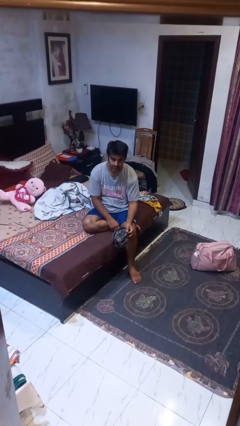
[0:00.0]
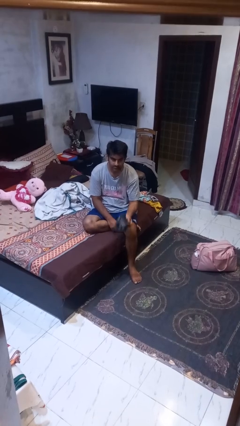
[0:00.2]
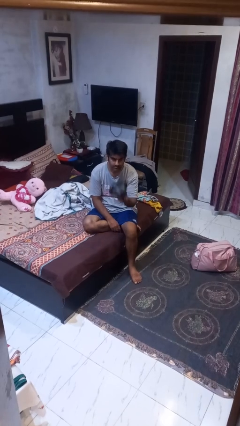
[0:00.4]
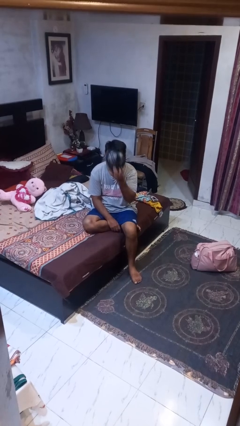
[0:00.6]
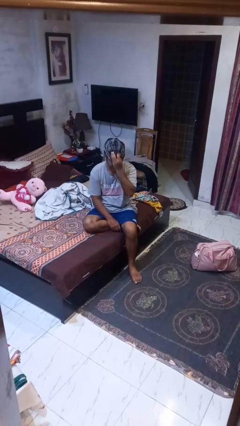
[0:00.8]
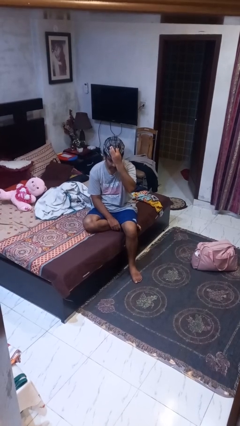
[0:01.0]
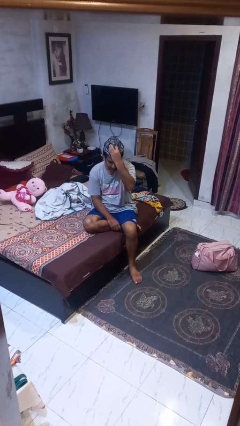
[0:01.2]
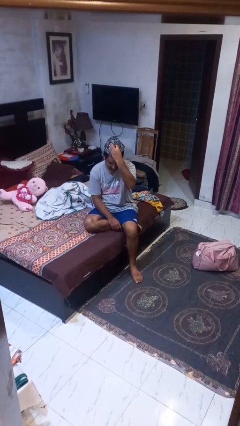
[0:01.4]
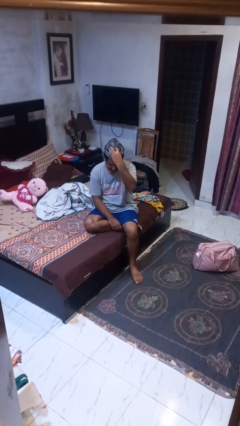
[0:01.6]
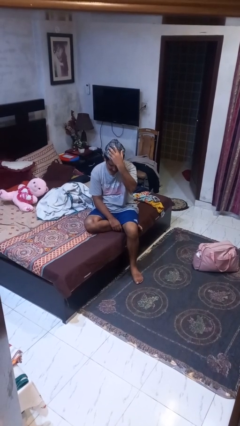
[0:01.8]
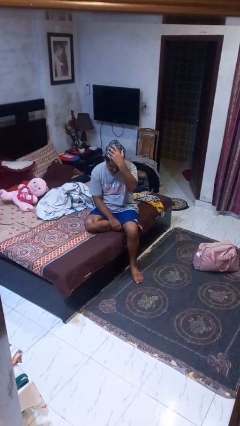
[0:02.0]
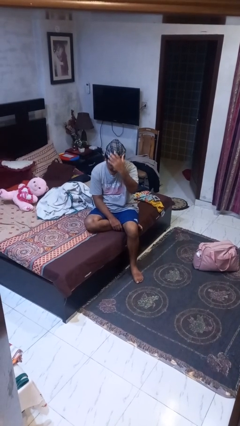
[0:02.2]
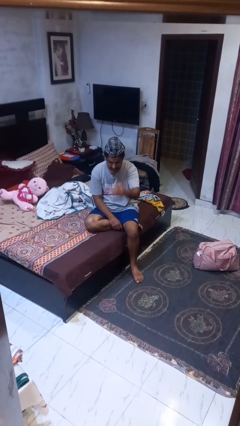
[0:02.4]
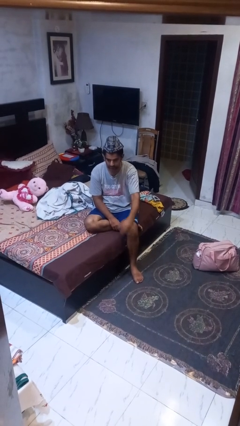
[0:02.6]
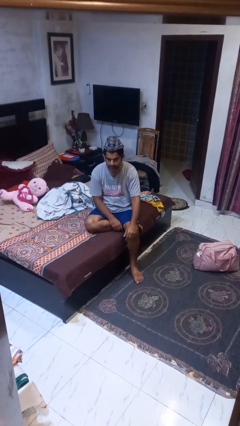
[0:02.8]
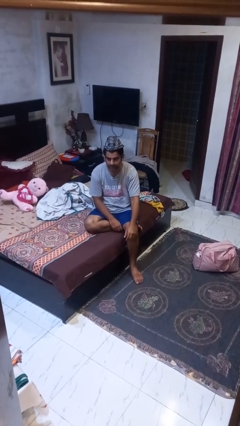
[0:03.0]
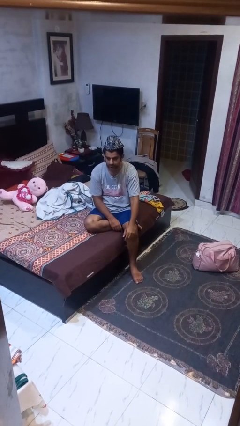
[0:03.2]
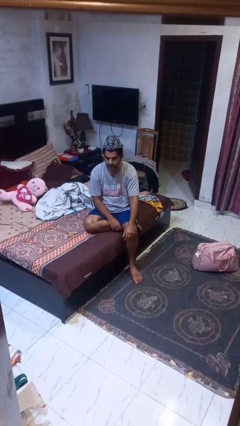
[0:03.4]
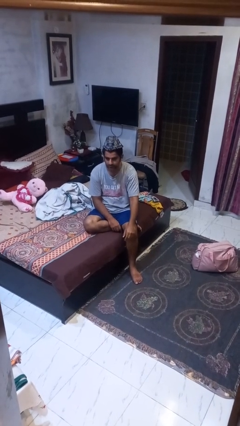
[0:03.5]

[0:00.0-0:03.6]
person puts on hat

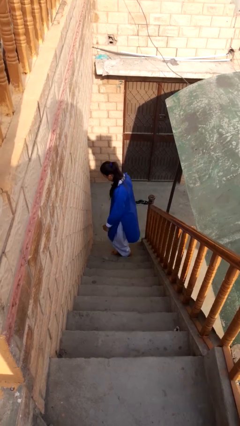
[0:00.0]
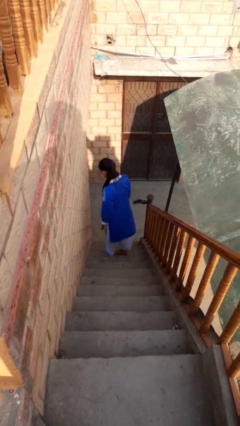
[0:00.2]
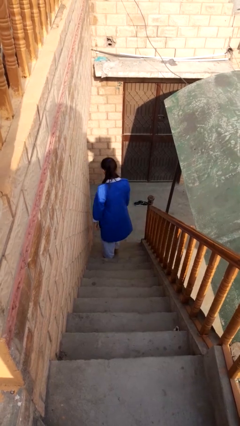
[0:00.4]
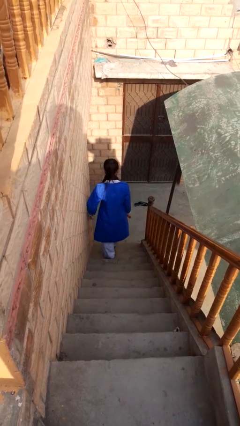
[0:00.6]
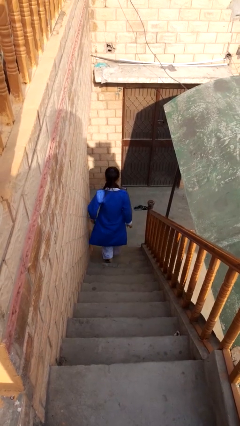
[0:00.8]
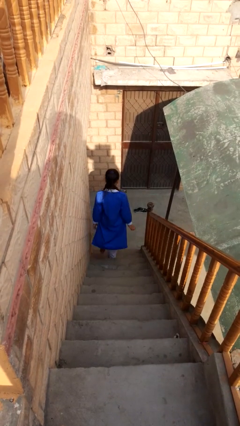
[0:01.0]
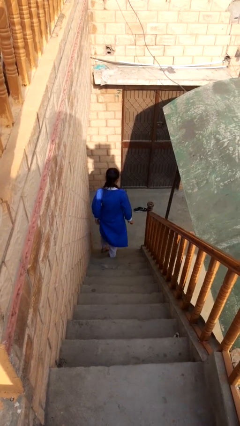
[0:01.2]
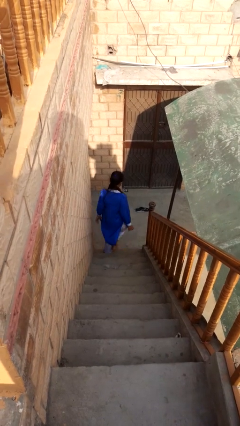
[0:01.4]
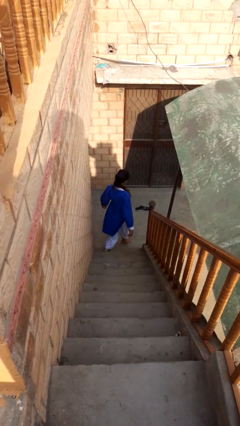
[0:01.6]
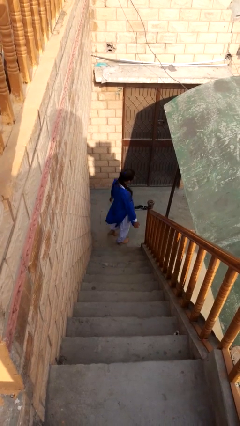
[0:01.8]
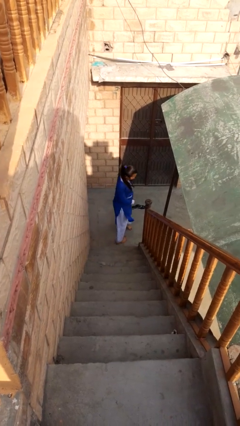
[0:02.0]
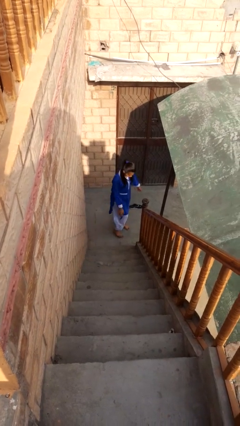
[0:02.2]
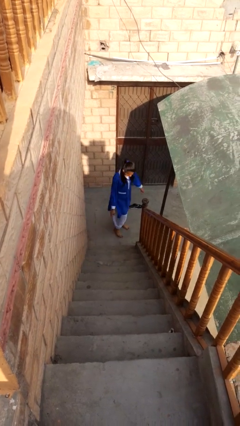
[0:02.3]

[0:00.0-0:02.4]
person climbs down stairs

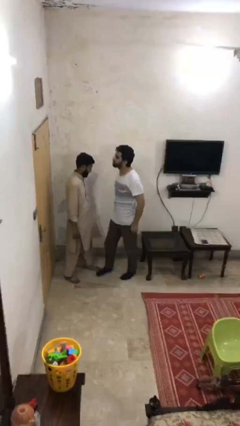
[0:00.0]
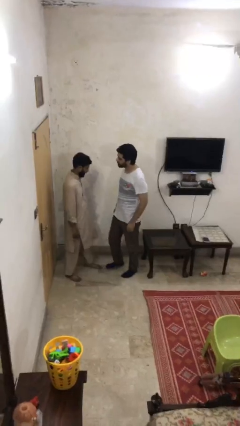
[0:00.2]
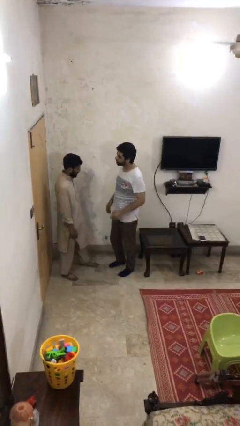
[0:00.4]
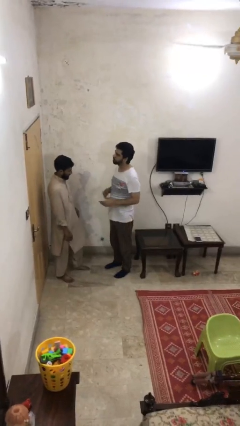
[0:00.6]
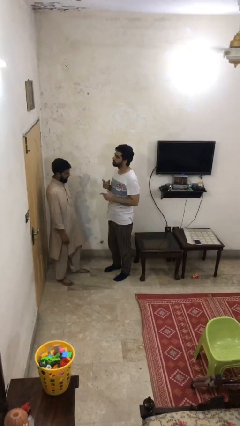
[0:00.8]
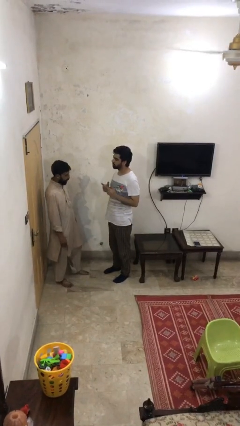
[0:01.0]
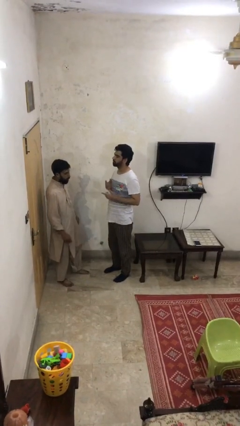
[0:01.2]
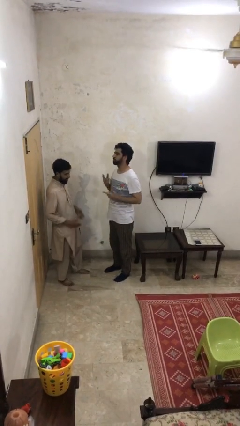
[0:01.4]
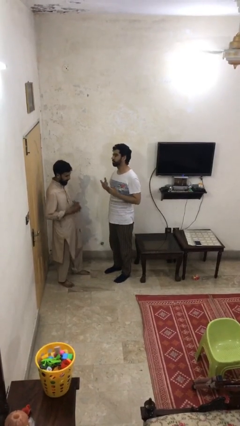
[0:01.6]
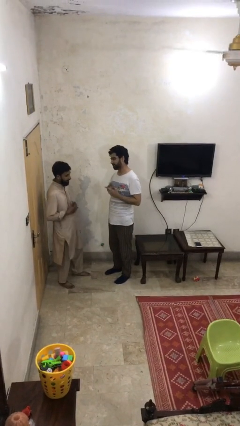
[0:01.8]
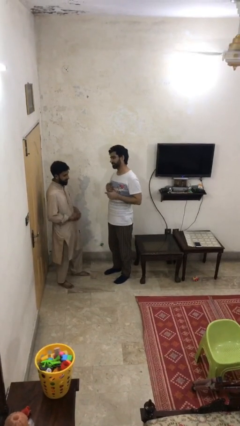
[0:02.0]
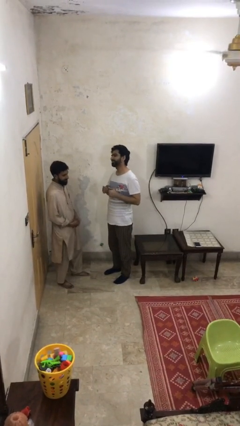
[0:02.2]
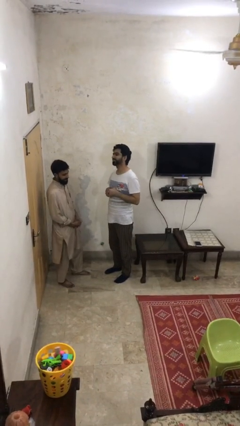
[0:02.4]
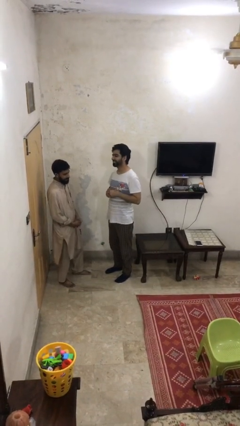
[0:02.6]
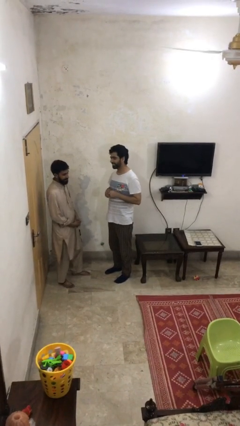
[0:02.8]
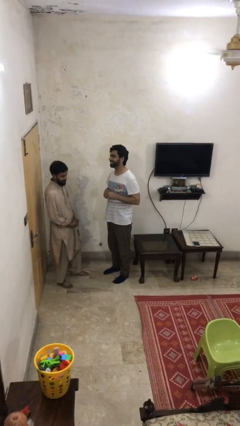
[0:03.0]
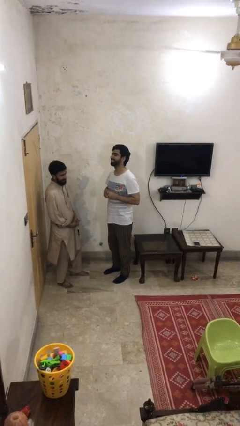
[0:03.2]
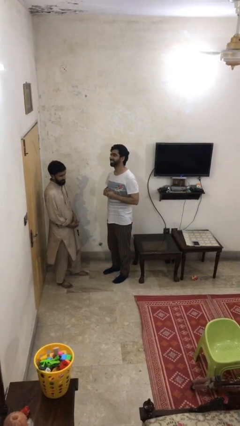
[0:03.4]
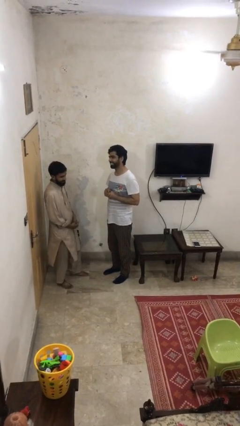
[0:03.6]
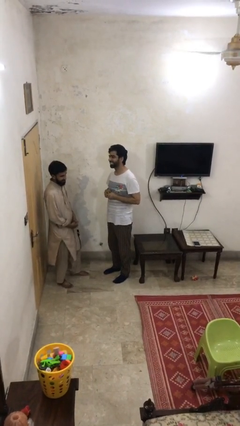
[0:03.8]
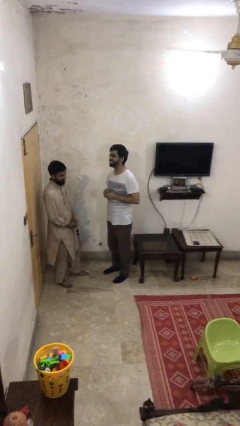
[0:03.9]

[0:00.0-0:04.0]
person talks to person

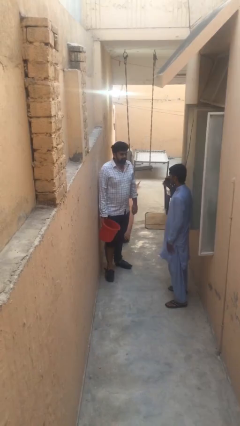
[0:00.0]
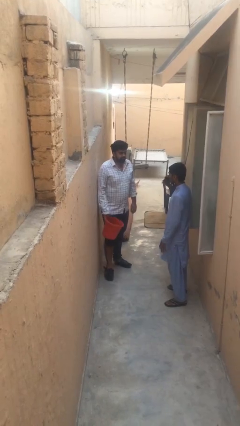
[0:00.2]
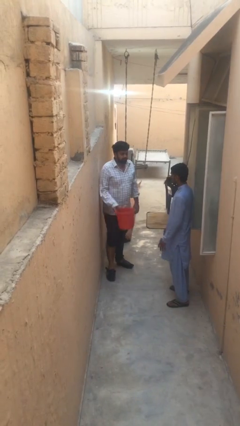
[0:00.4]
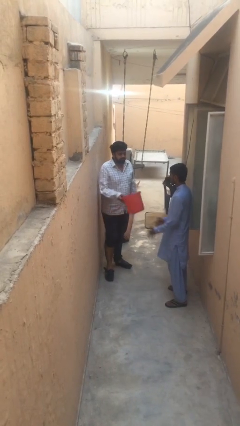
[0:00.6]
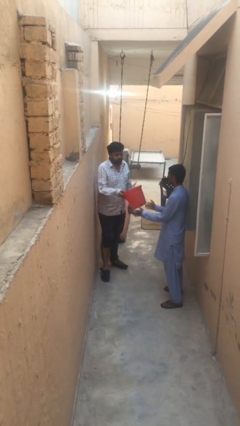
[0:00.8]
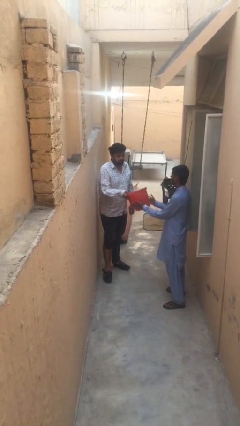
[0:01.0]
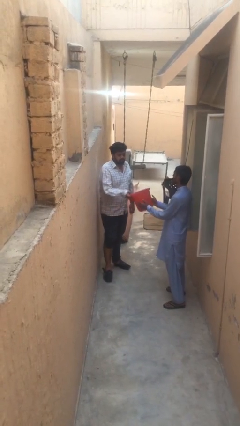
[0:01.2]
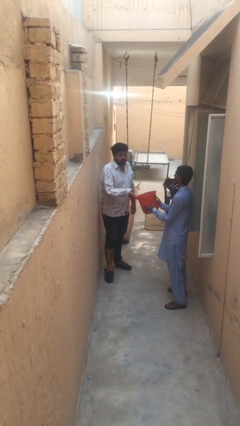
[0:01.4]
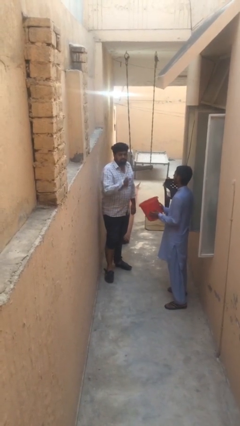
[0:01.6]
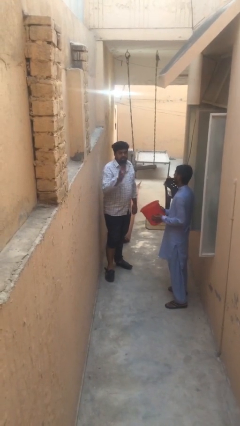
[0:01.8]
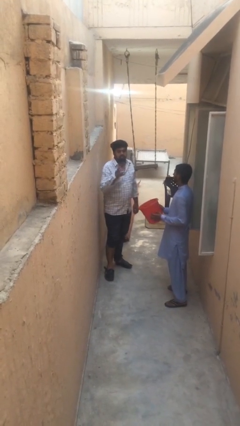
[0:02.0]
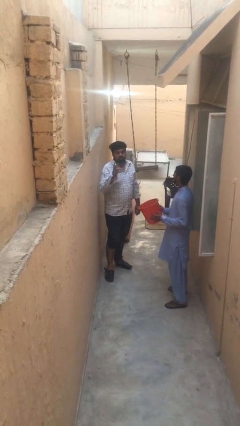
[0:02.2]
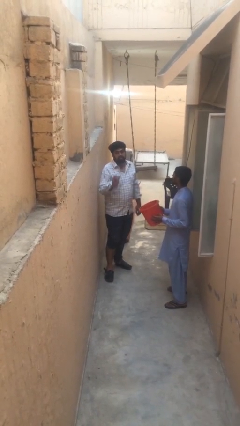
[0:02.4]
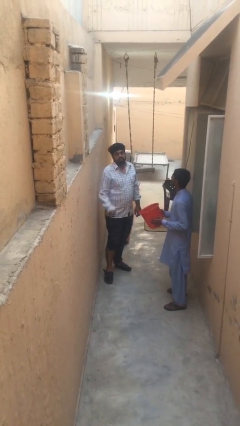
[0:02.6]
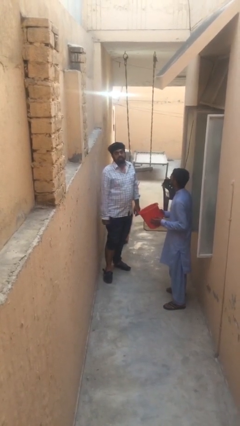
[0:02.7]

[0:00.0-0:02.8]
person transfers object to person

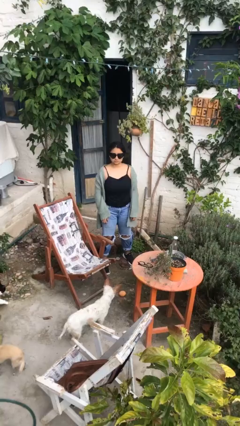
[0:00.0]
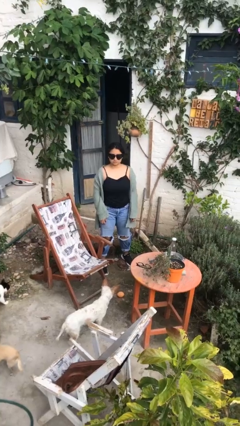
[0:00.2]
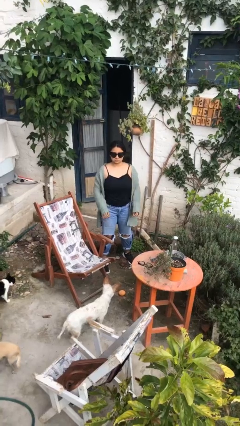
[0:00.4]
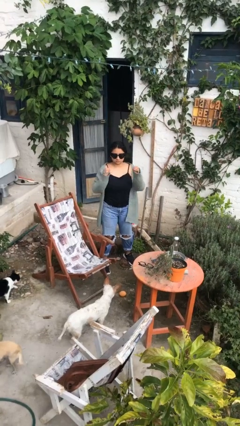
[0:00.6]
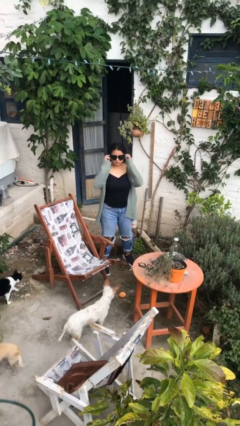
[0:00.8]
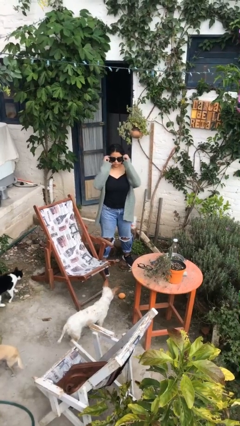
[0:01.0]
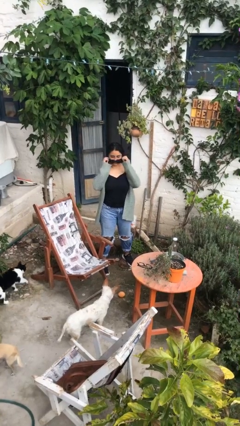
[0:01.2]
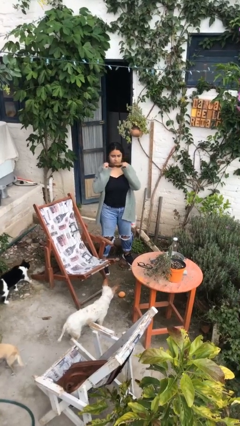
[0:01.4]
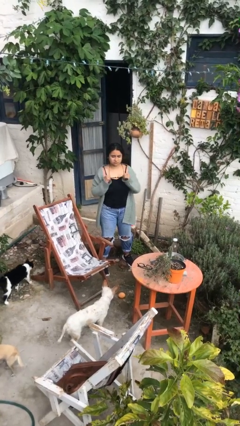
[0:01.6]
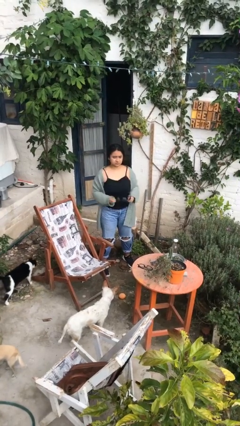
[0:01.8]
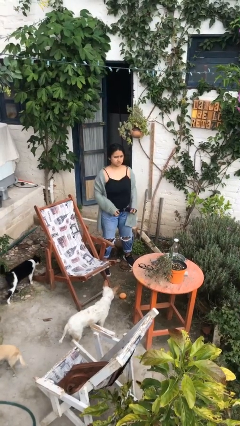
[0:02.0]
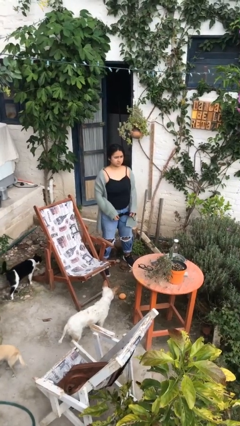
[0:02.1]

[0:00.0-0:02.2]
person takes off sunglasses

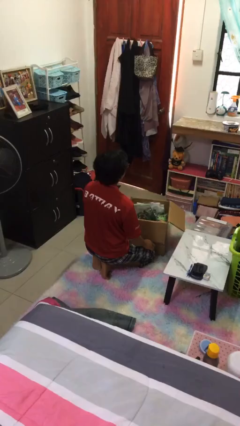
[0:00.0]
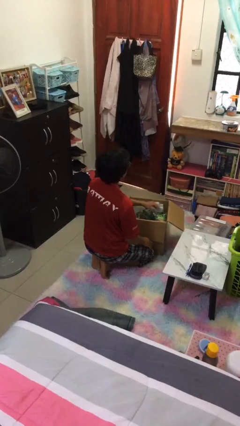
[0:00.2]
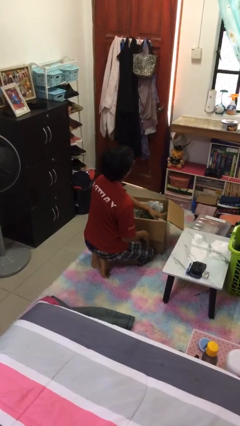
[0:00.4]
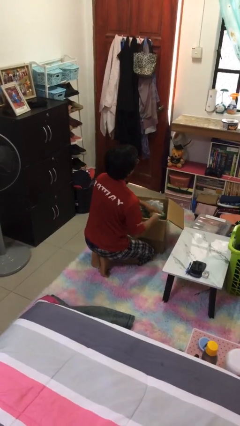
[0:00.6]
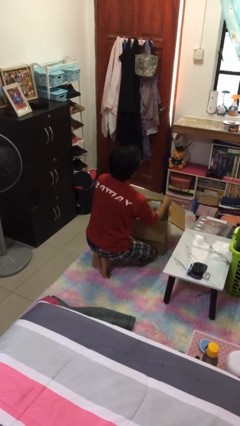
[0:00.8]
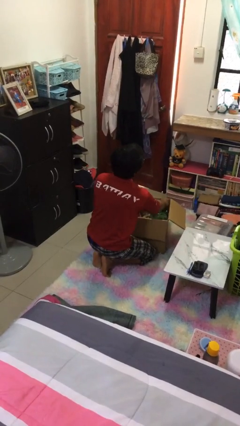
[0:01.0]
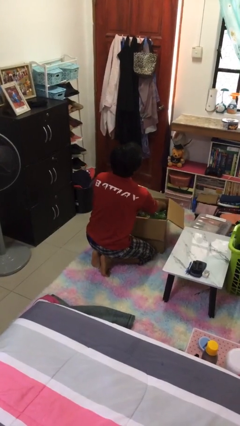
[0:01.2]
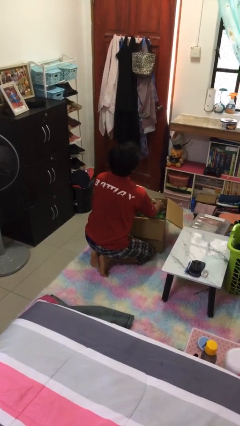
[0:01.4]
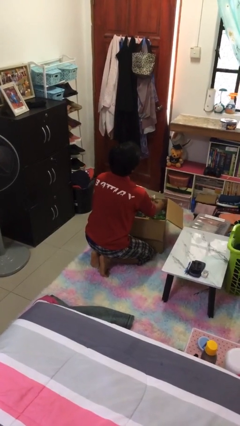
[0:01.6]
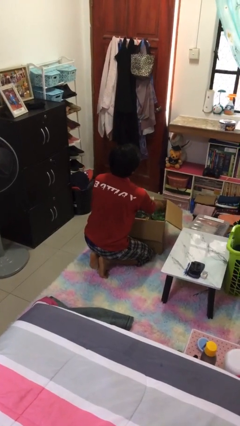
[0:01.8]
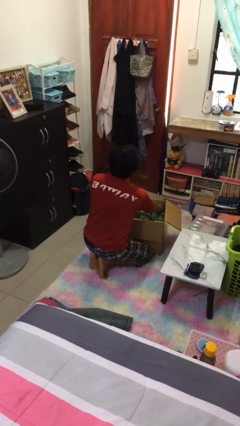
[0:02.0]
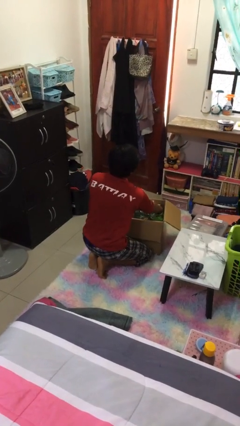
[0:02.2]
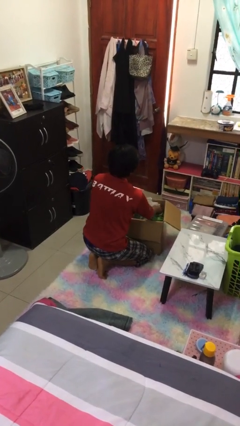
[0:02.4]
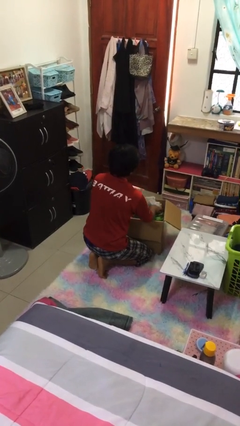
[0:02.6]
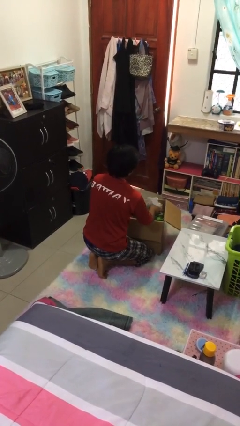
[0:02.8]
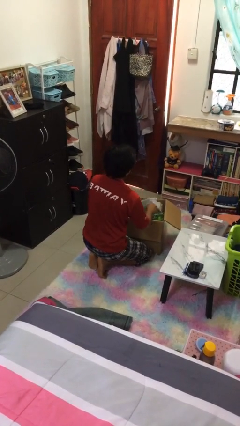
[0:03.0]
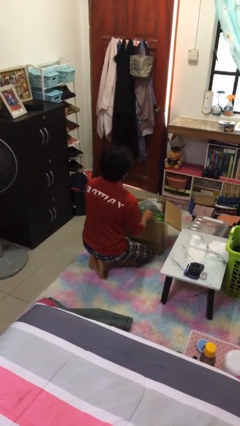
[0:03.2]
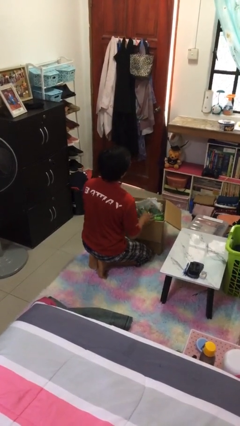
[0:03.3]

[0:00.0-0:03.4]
person searches in box
